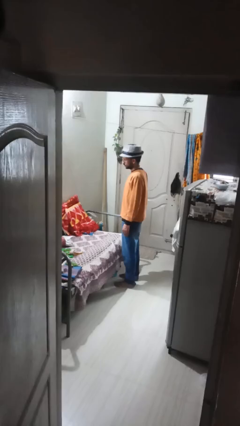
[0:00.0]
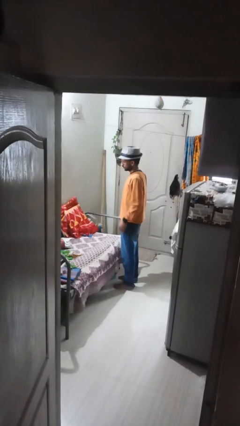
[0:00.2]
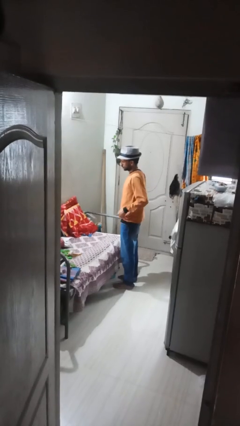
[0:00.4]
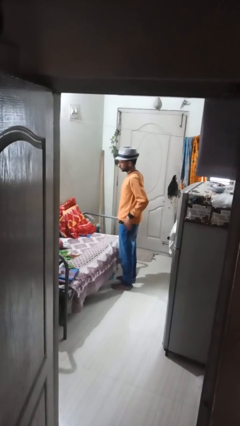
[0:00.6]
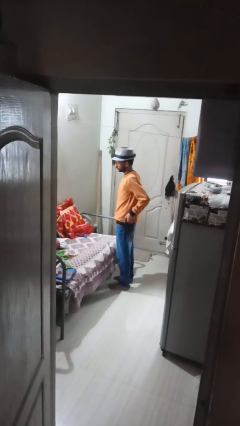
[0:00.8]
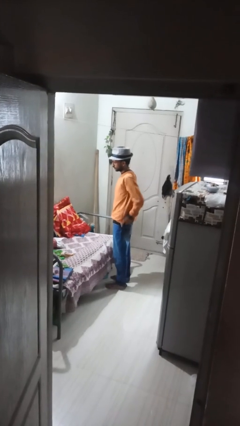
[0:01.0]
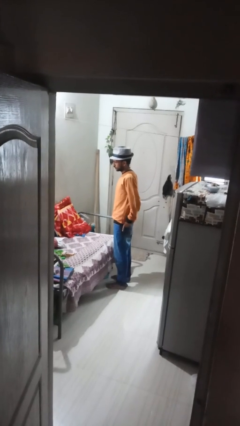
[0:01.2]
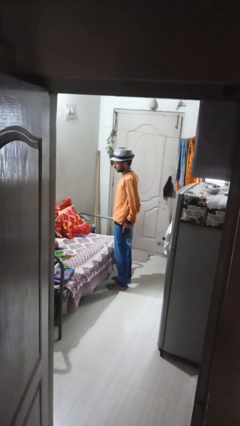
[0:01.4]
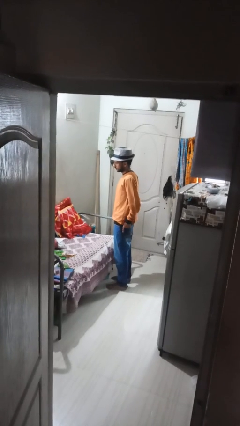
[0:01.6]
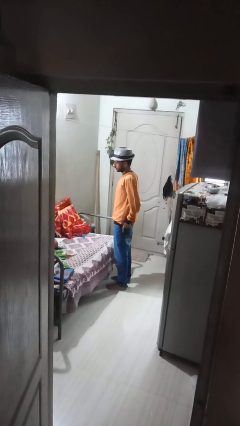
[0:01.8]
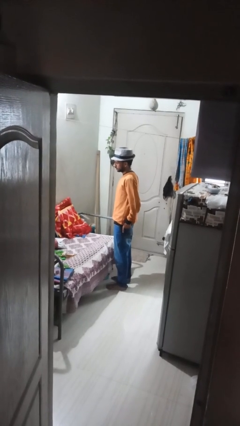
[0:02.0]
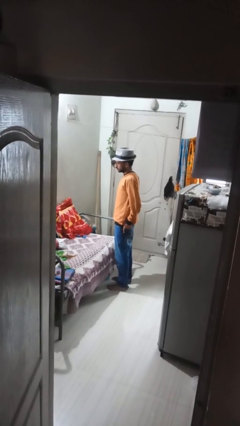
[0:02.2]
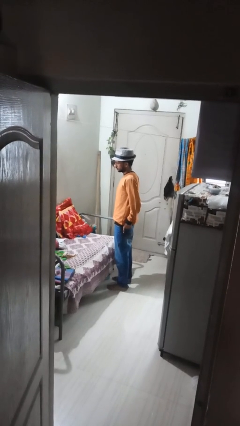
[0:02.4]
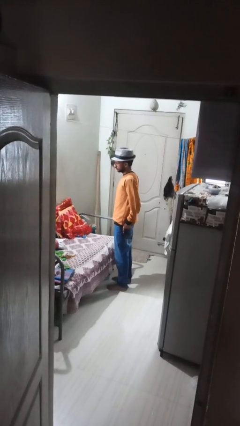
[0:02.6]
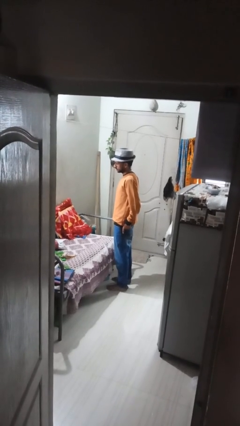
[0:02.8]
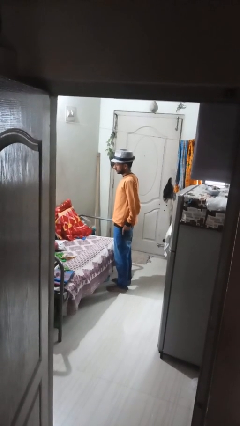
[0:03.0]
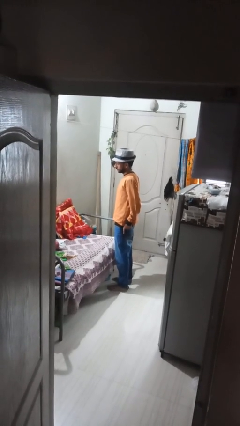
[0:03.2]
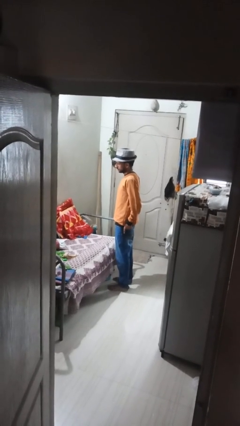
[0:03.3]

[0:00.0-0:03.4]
person puts hands in back pockets

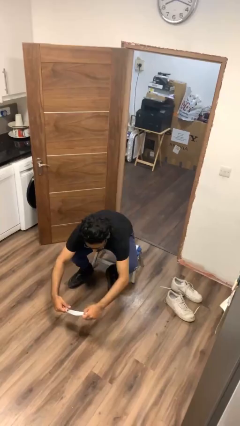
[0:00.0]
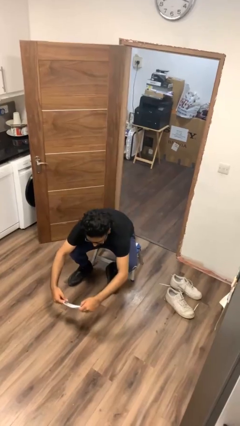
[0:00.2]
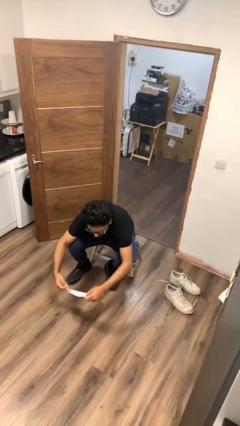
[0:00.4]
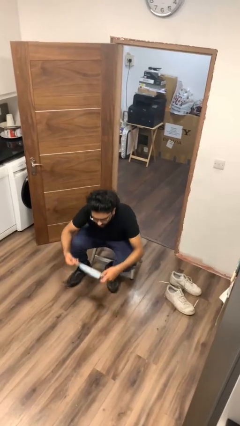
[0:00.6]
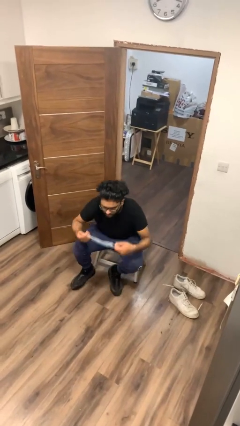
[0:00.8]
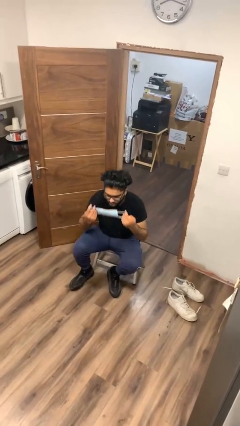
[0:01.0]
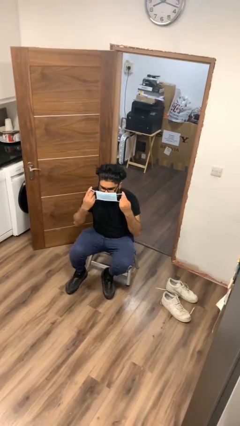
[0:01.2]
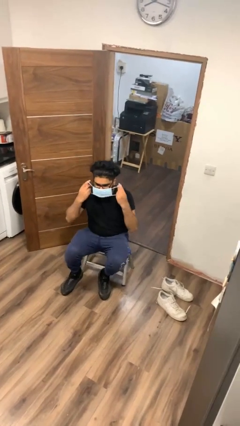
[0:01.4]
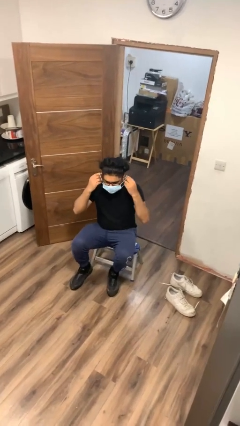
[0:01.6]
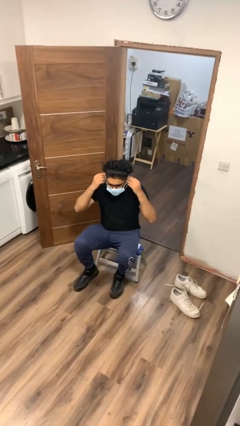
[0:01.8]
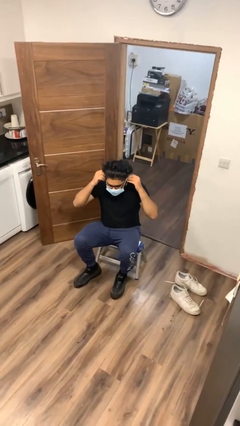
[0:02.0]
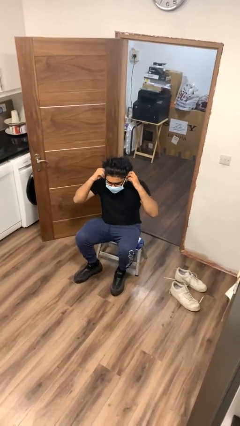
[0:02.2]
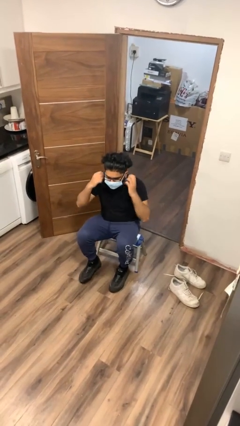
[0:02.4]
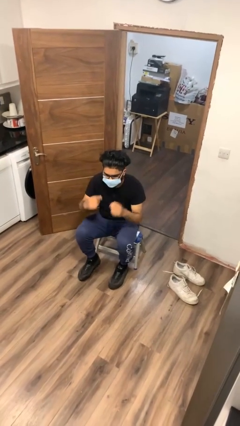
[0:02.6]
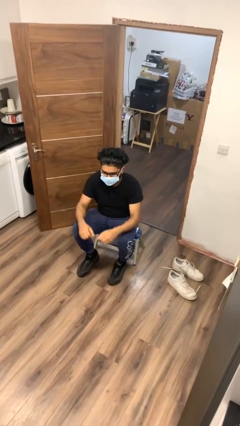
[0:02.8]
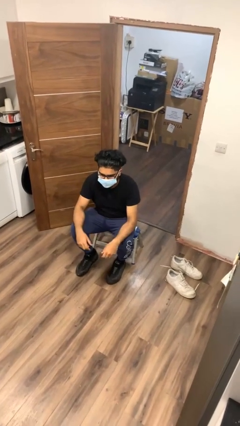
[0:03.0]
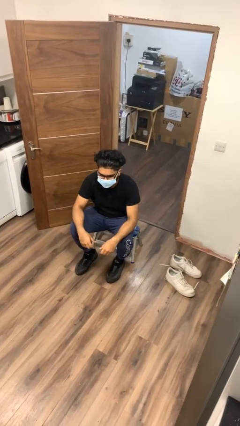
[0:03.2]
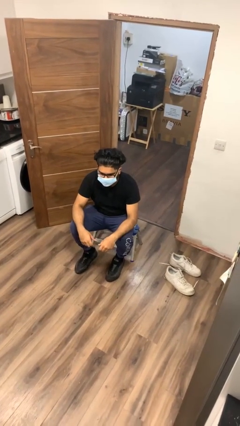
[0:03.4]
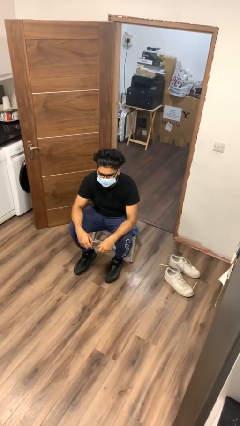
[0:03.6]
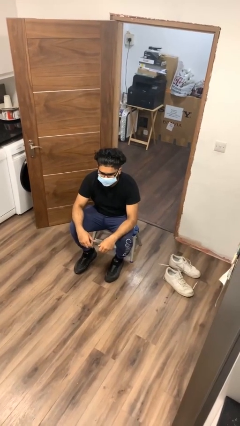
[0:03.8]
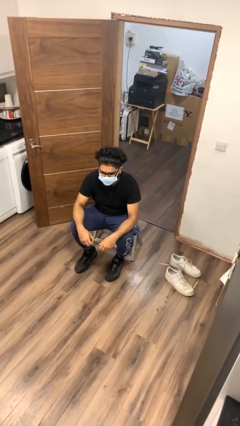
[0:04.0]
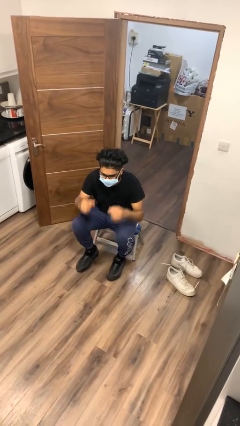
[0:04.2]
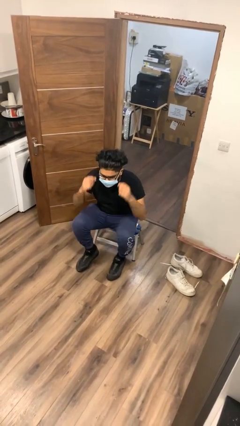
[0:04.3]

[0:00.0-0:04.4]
person puts on facemask

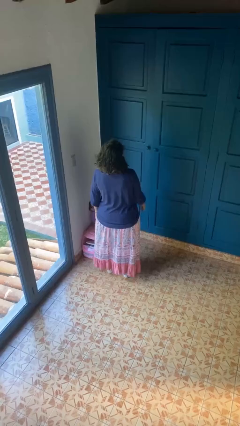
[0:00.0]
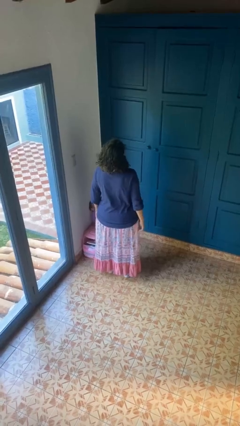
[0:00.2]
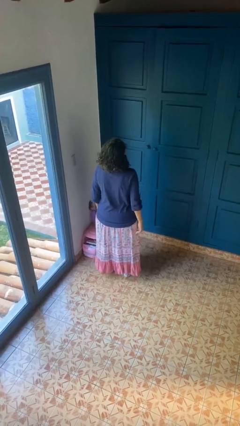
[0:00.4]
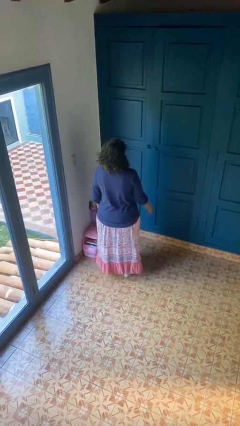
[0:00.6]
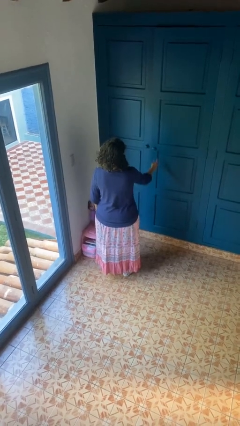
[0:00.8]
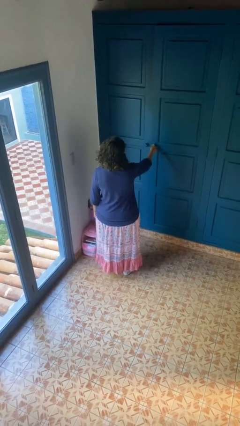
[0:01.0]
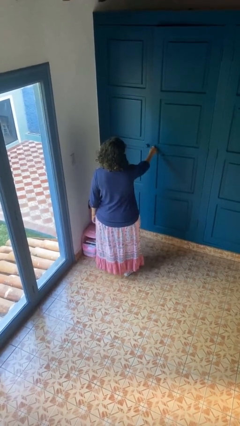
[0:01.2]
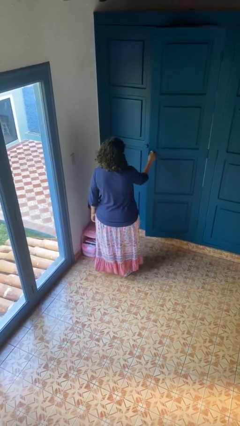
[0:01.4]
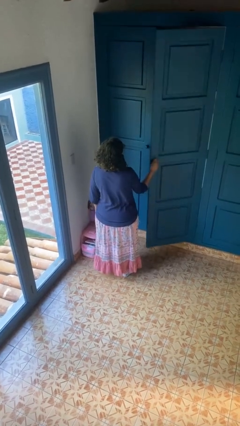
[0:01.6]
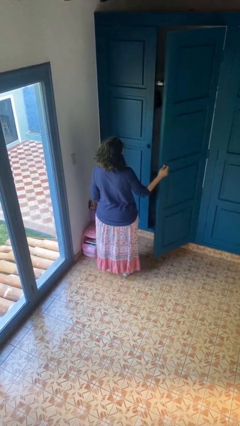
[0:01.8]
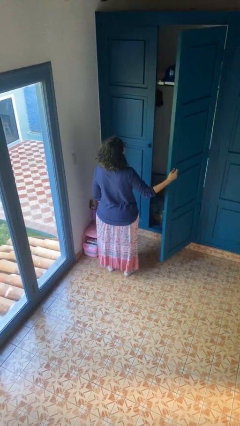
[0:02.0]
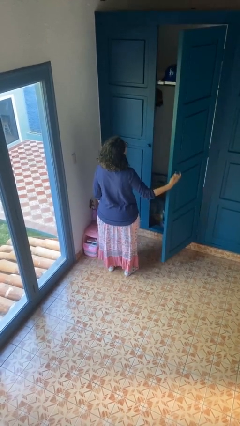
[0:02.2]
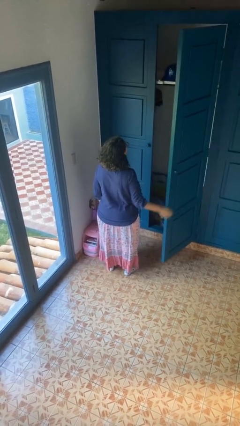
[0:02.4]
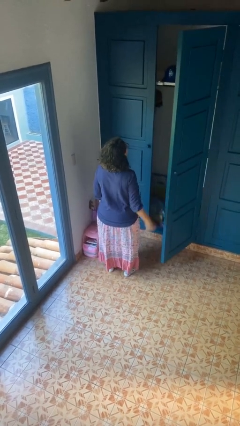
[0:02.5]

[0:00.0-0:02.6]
person opens closet door

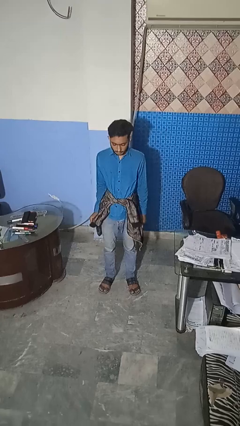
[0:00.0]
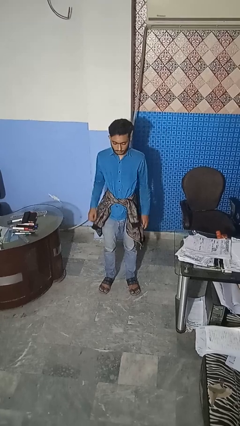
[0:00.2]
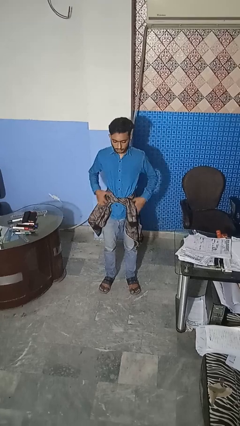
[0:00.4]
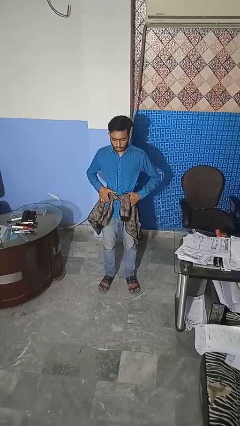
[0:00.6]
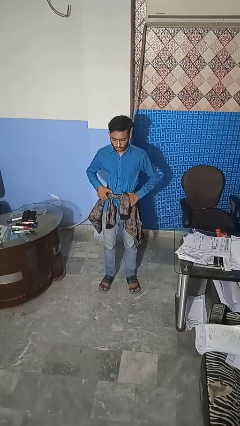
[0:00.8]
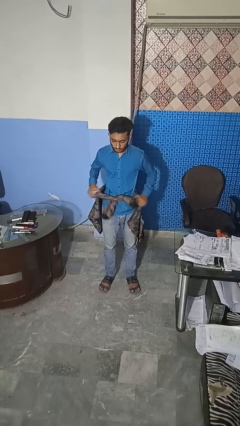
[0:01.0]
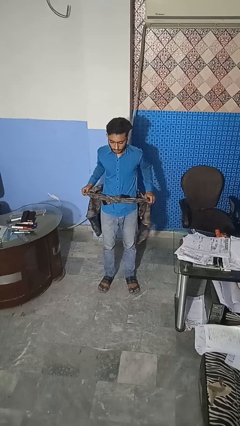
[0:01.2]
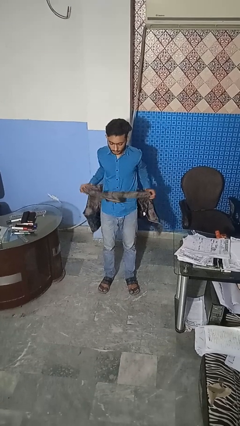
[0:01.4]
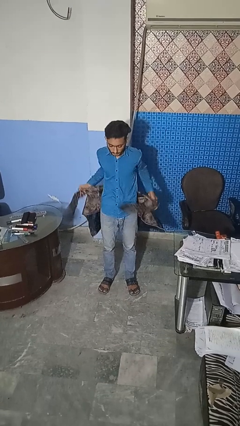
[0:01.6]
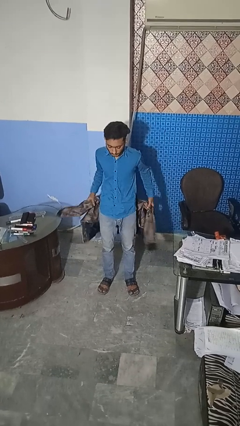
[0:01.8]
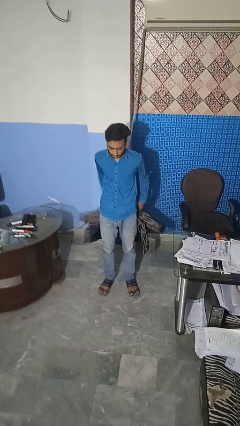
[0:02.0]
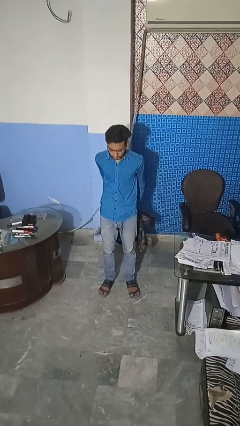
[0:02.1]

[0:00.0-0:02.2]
person unties jacket around waist

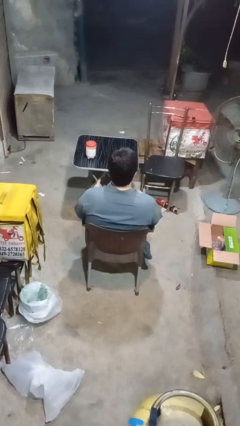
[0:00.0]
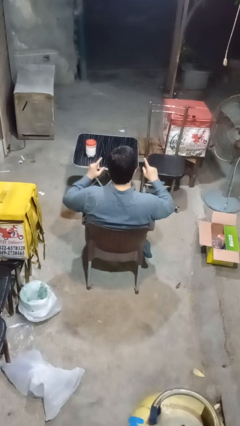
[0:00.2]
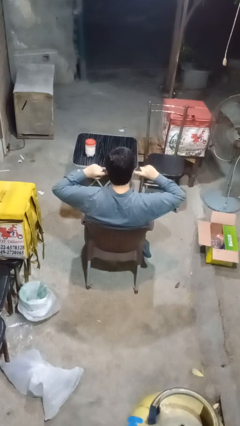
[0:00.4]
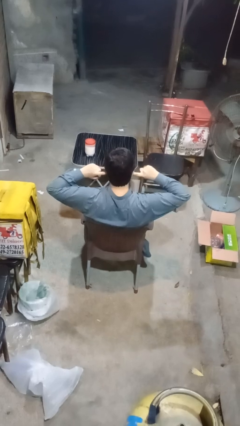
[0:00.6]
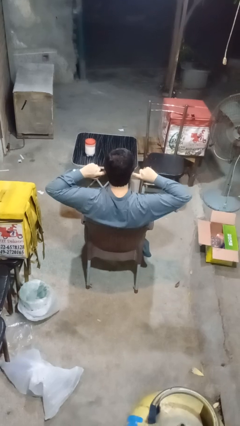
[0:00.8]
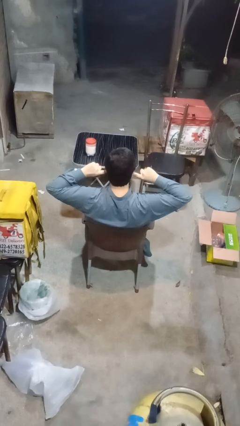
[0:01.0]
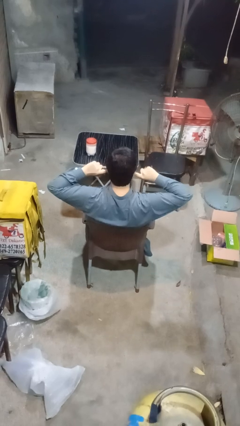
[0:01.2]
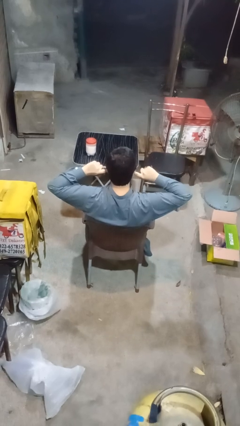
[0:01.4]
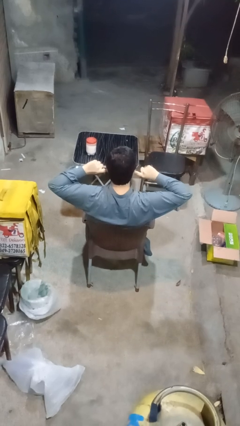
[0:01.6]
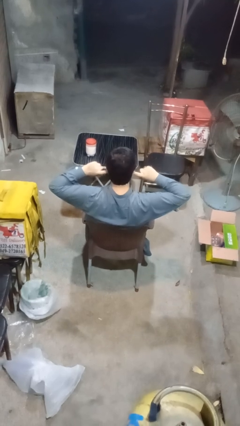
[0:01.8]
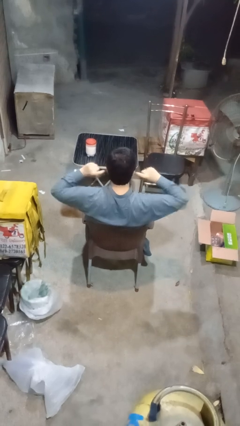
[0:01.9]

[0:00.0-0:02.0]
person puts fingers in ear

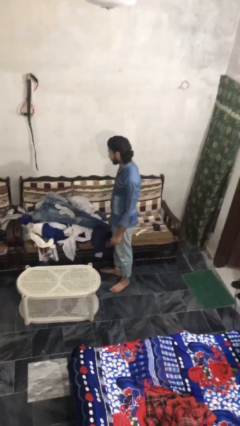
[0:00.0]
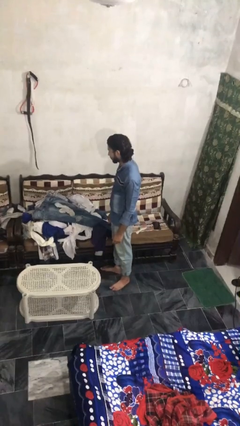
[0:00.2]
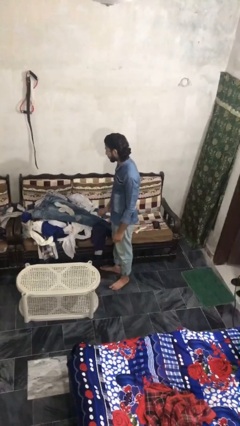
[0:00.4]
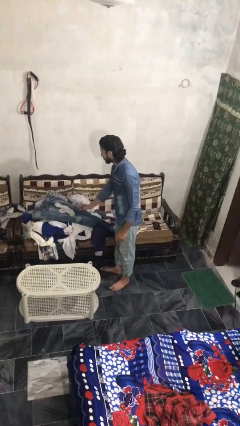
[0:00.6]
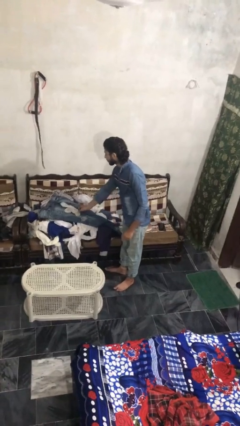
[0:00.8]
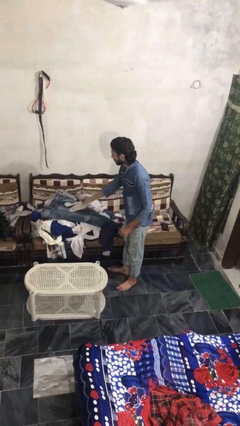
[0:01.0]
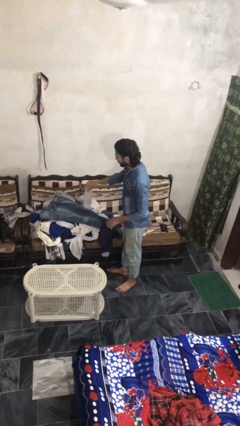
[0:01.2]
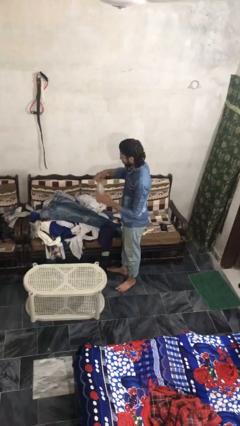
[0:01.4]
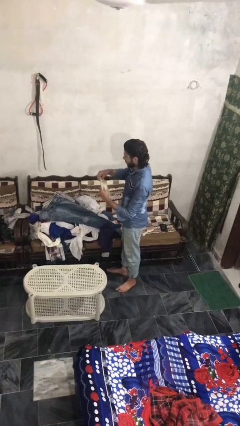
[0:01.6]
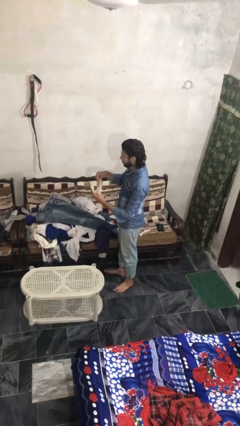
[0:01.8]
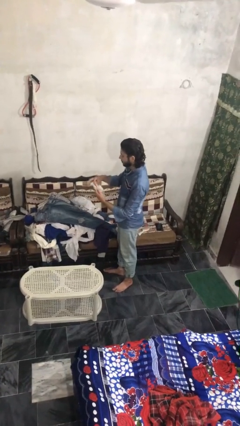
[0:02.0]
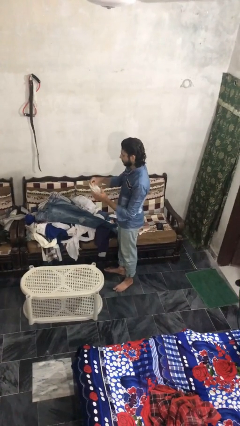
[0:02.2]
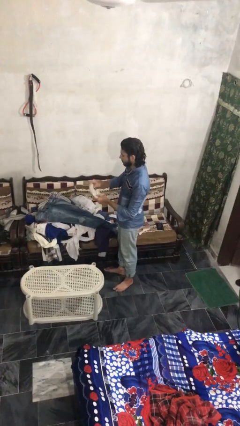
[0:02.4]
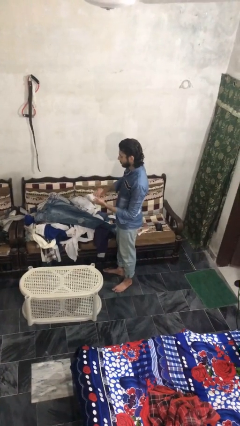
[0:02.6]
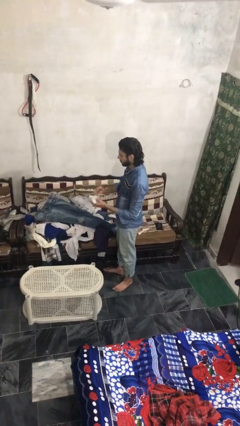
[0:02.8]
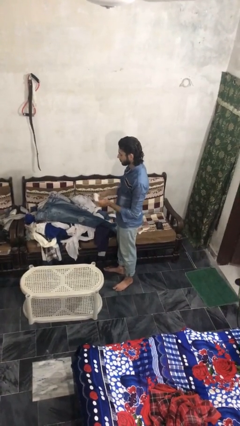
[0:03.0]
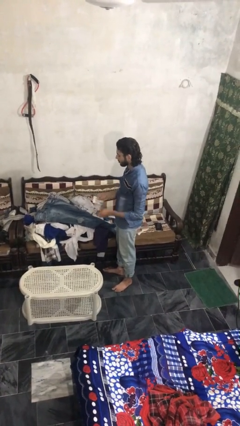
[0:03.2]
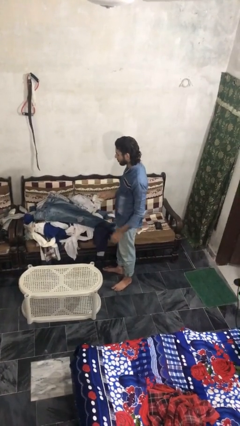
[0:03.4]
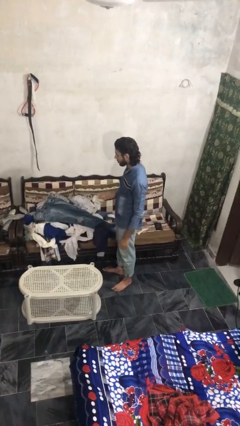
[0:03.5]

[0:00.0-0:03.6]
person folds socks
